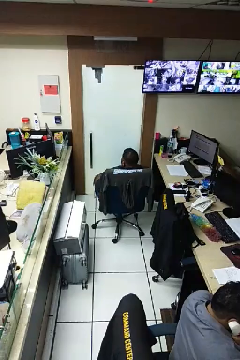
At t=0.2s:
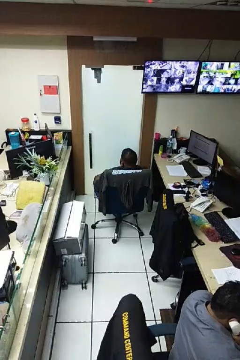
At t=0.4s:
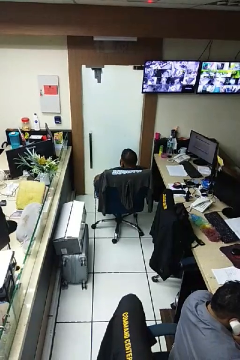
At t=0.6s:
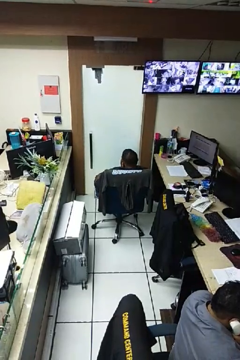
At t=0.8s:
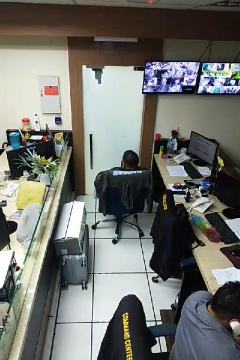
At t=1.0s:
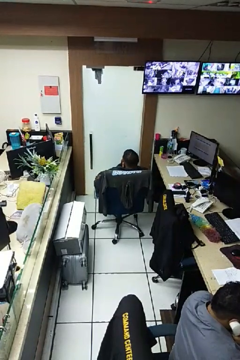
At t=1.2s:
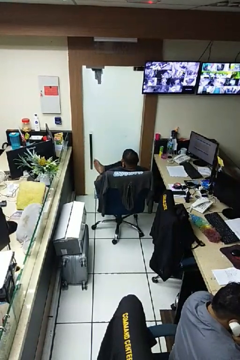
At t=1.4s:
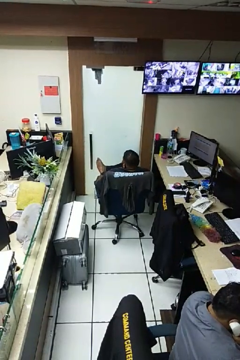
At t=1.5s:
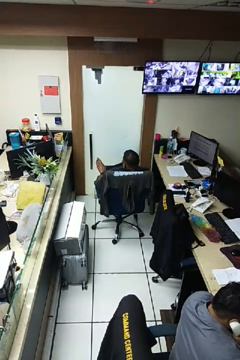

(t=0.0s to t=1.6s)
person crosses legs

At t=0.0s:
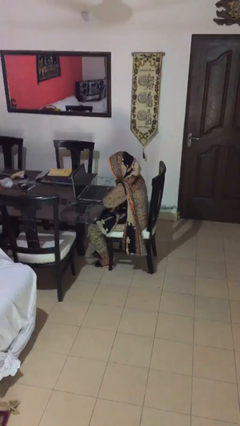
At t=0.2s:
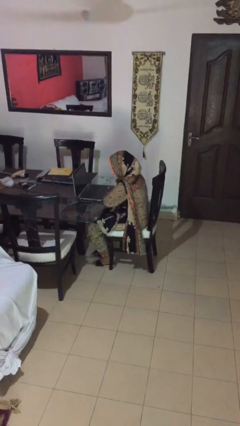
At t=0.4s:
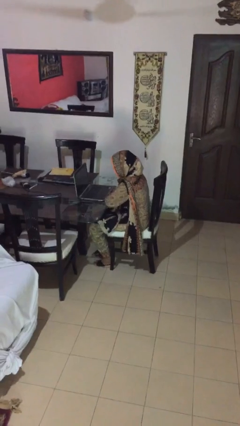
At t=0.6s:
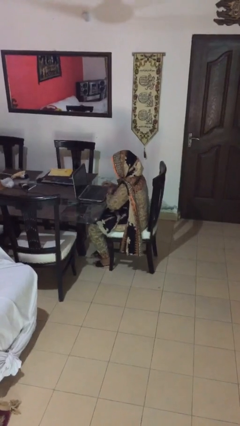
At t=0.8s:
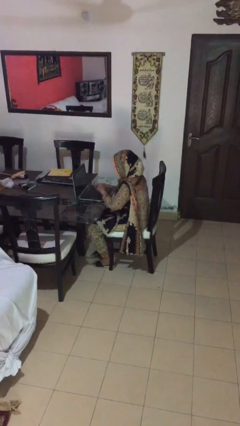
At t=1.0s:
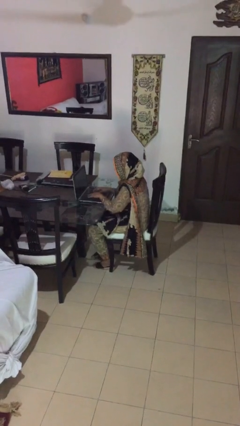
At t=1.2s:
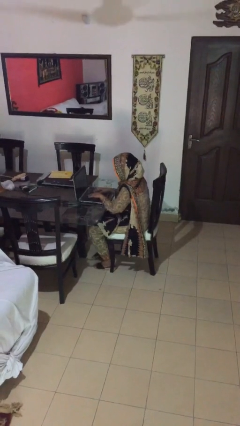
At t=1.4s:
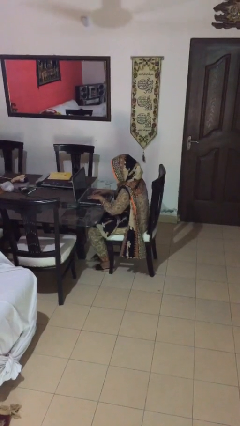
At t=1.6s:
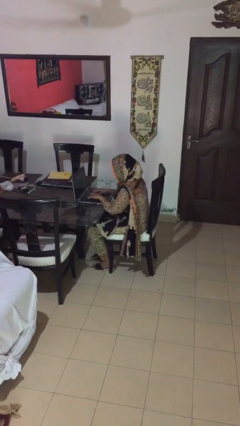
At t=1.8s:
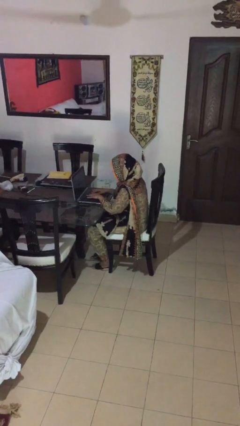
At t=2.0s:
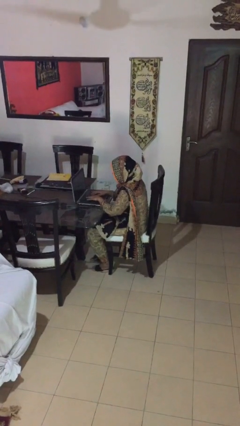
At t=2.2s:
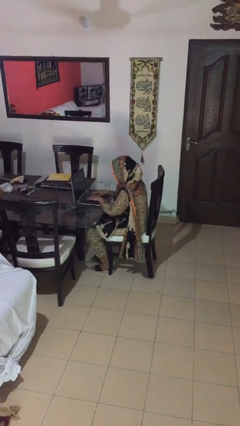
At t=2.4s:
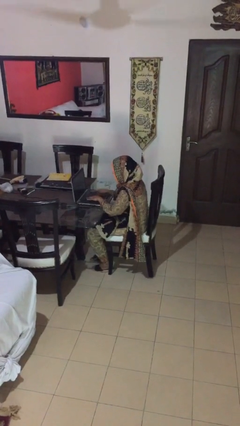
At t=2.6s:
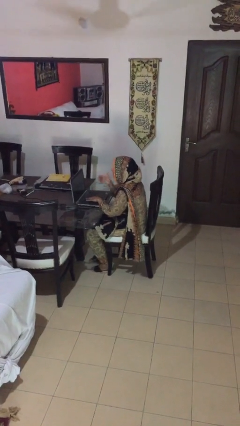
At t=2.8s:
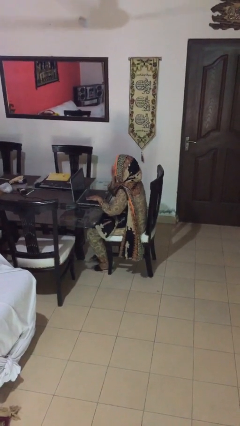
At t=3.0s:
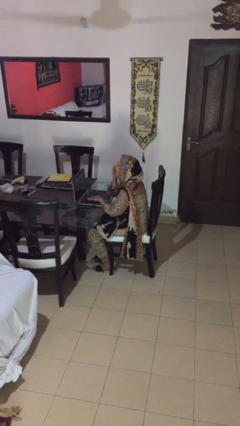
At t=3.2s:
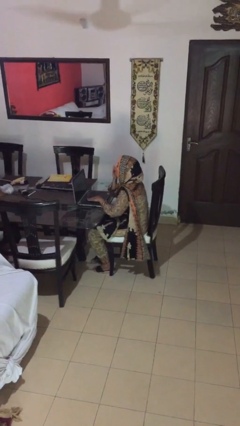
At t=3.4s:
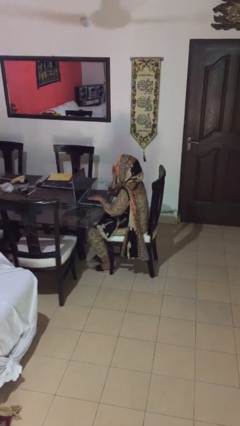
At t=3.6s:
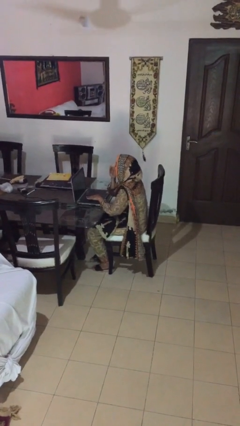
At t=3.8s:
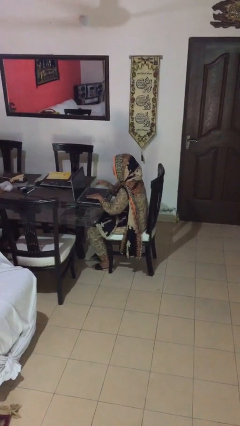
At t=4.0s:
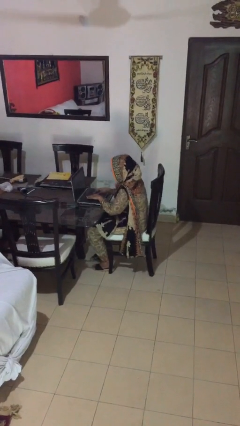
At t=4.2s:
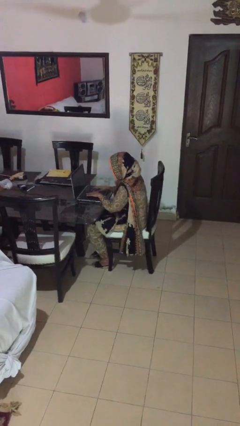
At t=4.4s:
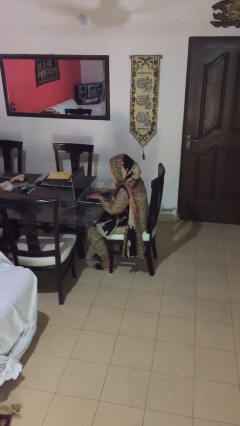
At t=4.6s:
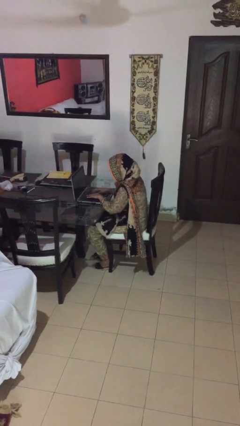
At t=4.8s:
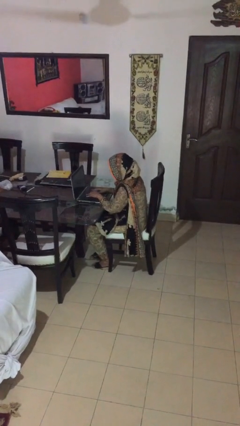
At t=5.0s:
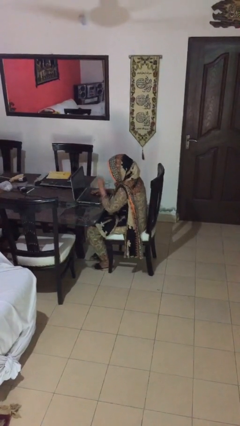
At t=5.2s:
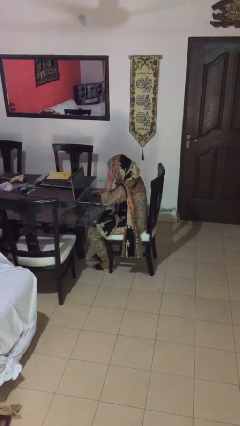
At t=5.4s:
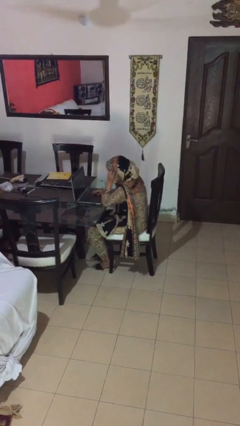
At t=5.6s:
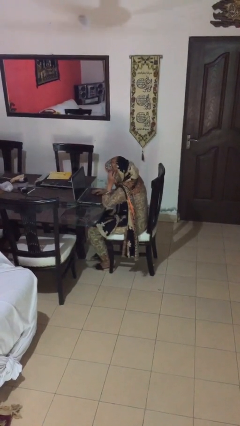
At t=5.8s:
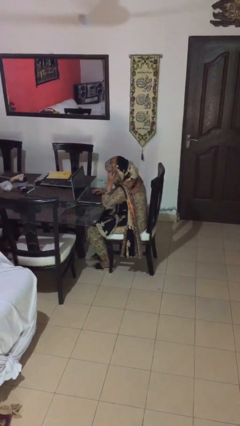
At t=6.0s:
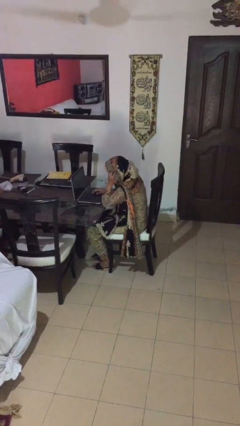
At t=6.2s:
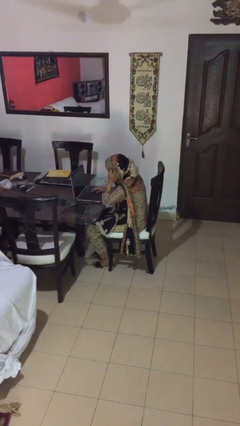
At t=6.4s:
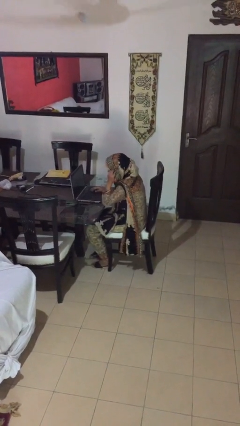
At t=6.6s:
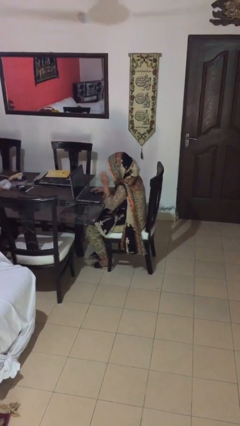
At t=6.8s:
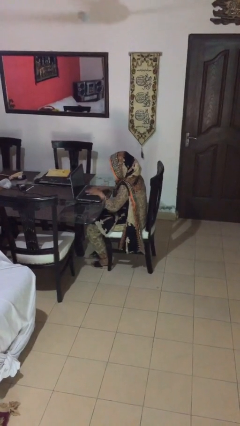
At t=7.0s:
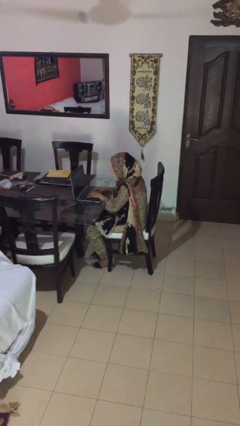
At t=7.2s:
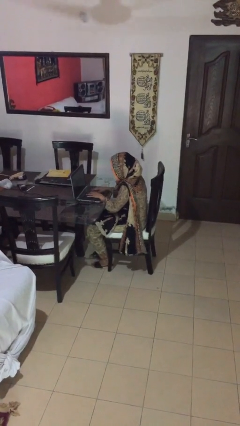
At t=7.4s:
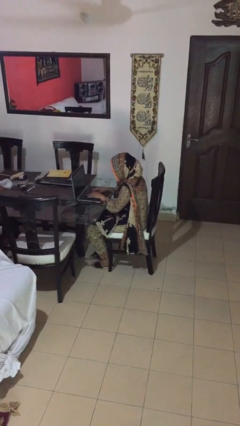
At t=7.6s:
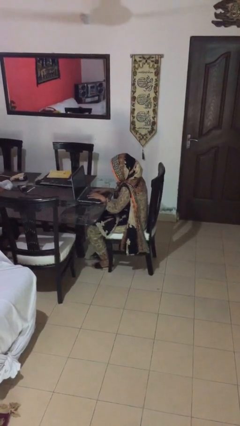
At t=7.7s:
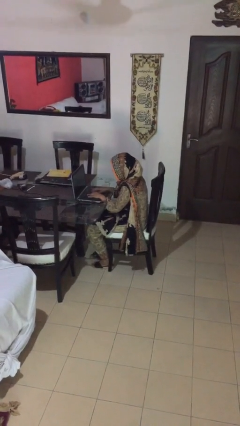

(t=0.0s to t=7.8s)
person interacts with laptop

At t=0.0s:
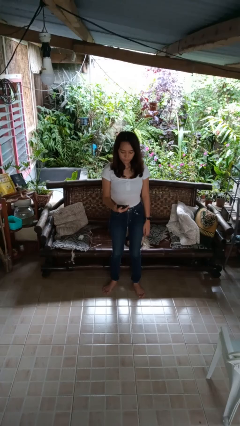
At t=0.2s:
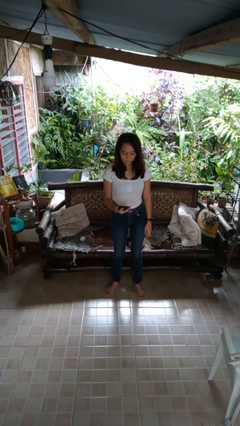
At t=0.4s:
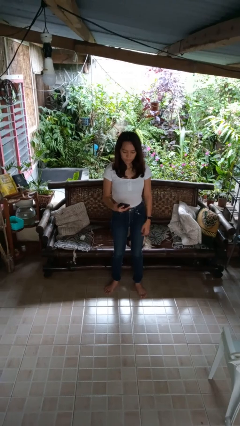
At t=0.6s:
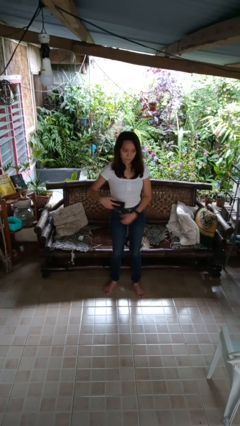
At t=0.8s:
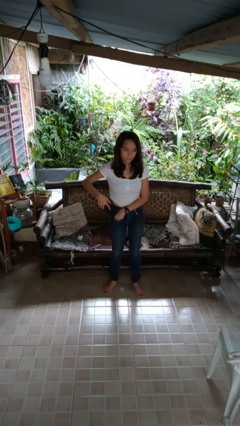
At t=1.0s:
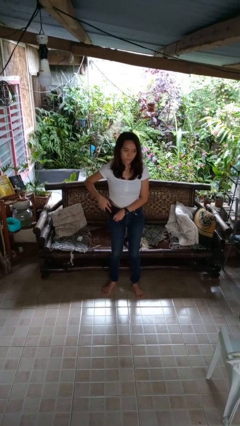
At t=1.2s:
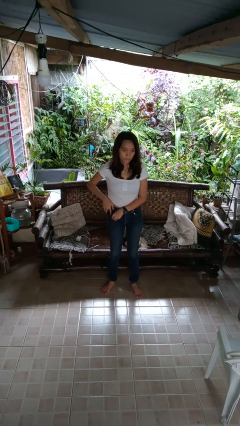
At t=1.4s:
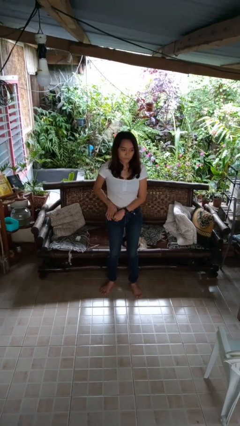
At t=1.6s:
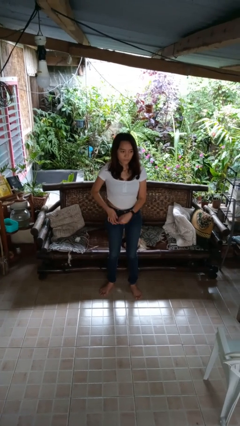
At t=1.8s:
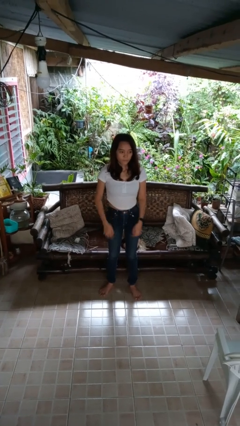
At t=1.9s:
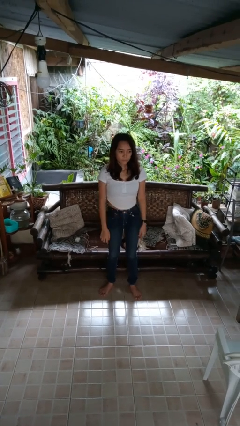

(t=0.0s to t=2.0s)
person puts phone into pocket

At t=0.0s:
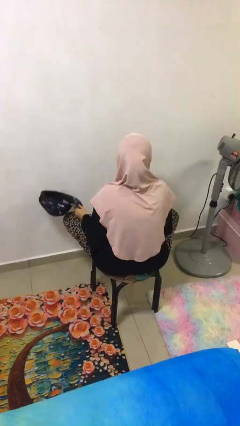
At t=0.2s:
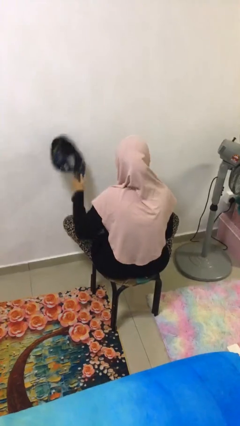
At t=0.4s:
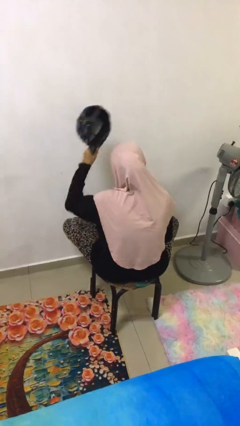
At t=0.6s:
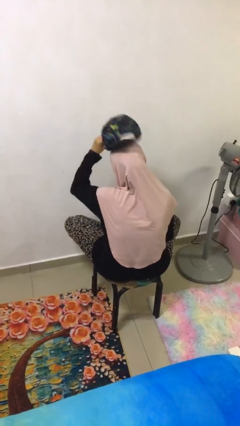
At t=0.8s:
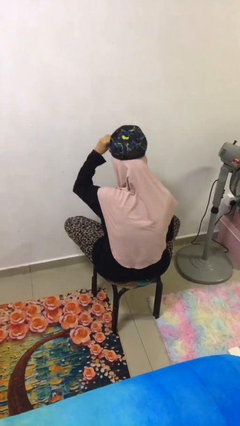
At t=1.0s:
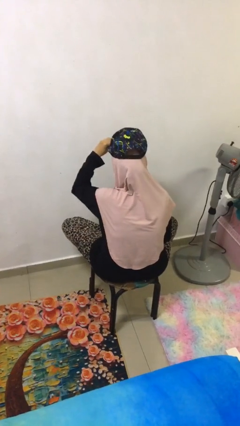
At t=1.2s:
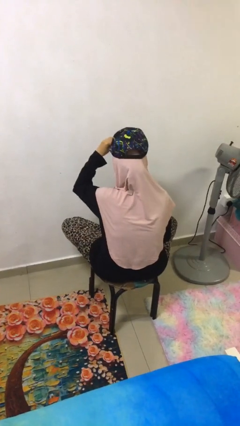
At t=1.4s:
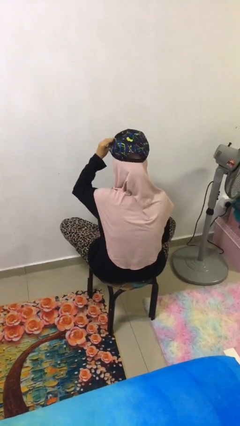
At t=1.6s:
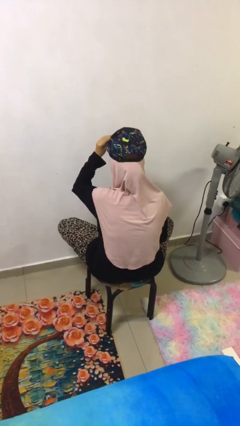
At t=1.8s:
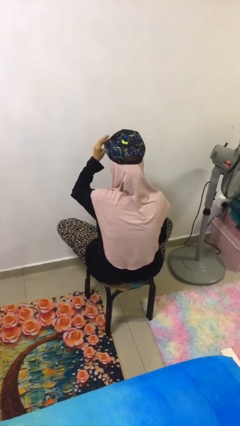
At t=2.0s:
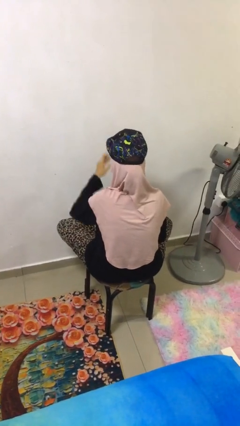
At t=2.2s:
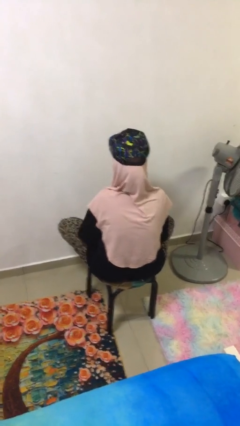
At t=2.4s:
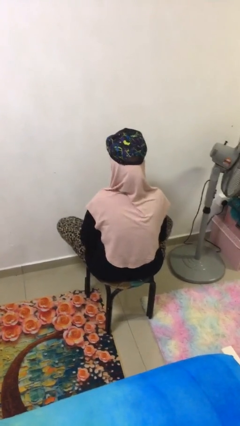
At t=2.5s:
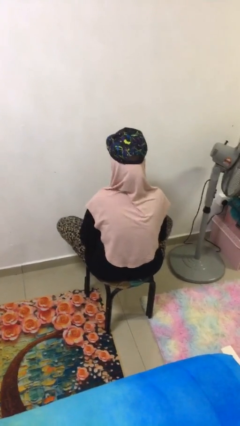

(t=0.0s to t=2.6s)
person puts on hat

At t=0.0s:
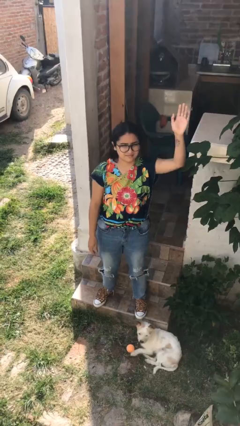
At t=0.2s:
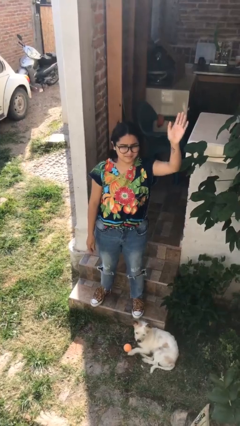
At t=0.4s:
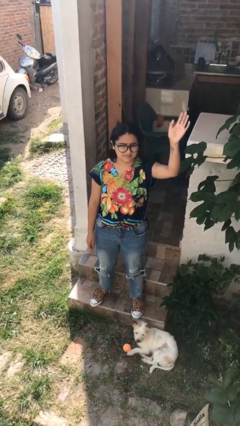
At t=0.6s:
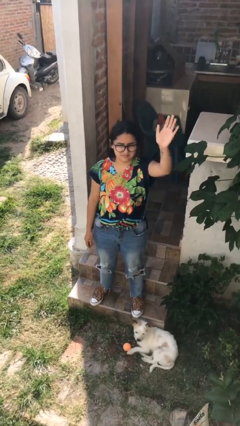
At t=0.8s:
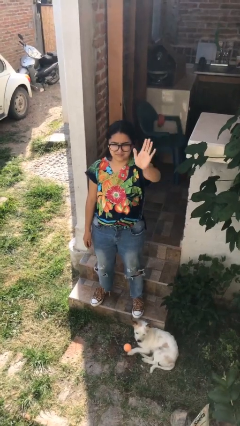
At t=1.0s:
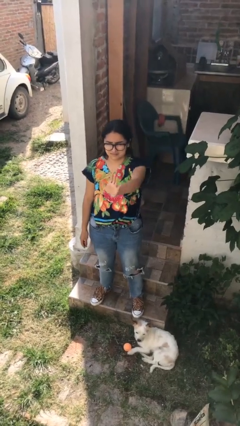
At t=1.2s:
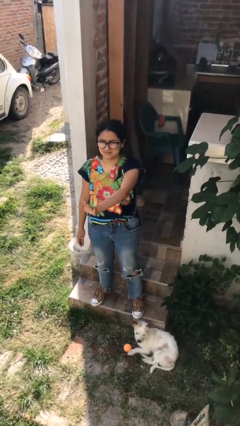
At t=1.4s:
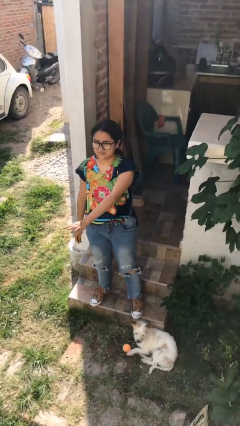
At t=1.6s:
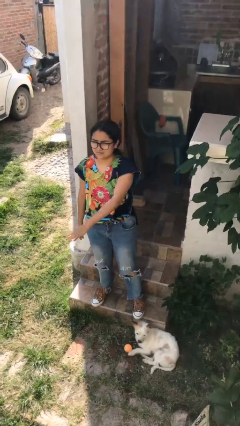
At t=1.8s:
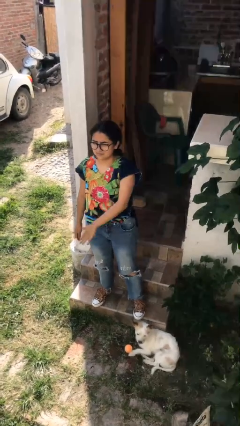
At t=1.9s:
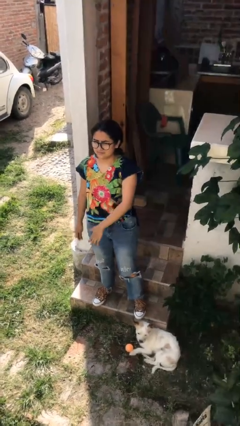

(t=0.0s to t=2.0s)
person gestures swipe down

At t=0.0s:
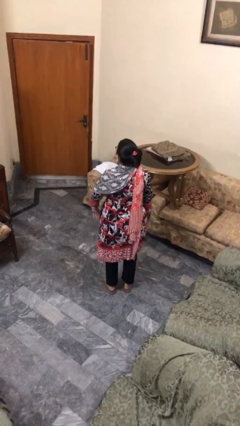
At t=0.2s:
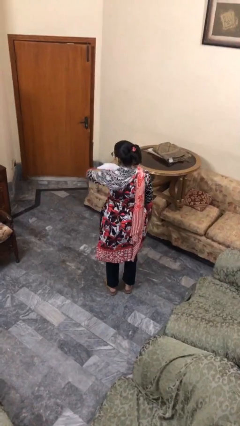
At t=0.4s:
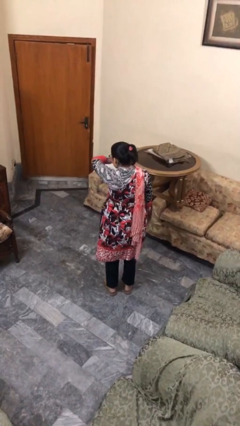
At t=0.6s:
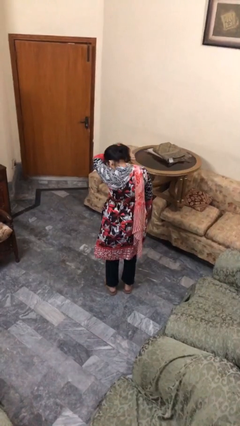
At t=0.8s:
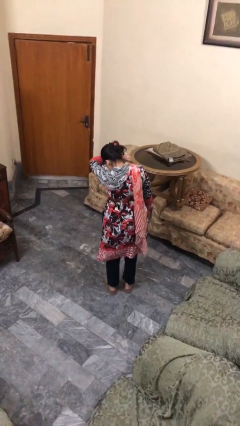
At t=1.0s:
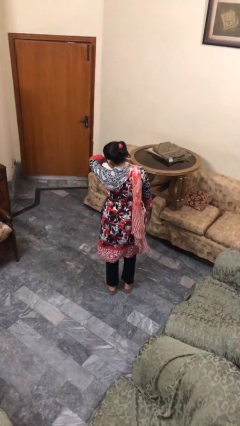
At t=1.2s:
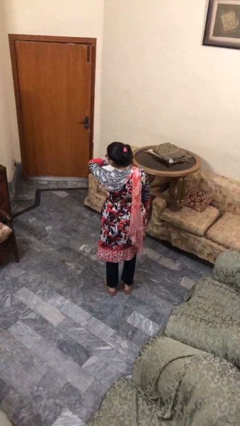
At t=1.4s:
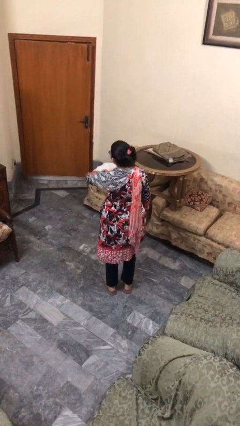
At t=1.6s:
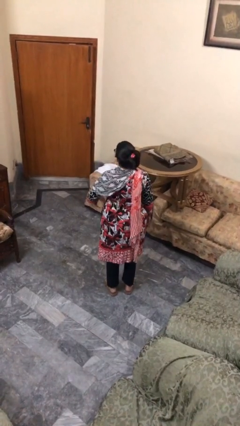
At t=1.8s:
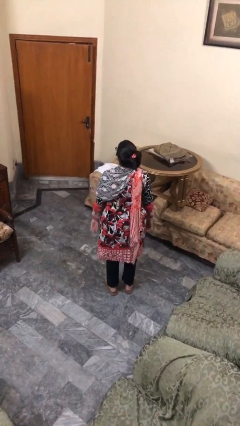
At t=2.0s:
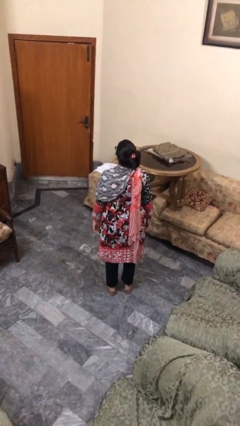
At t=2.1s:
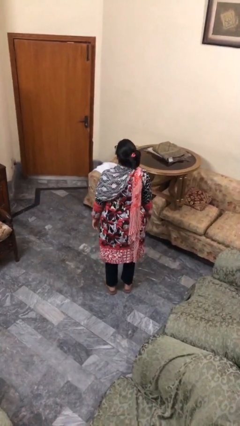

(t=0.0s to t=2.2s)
person sneezes into arm
